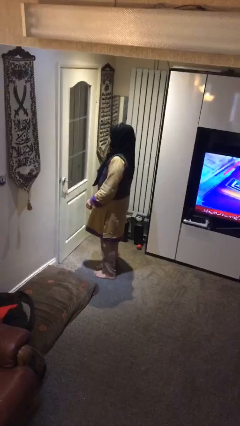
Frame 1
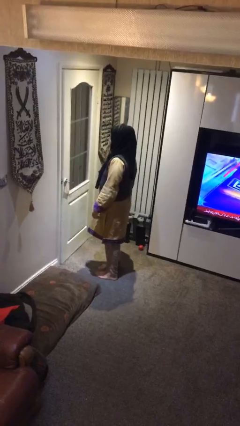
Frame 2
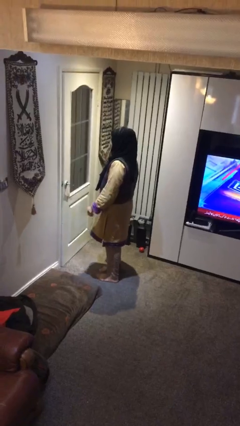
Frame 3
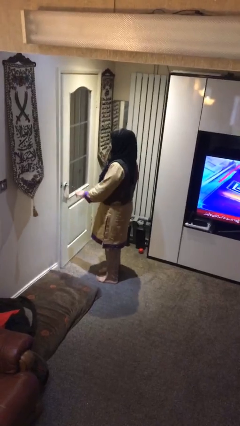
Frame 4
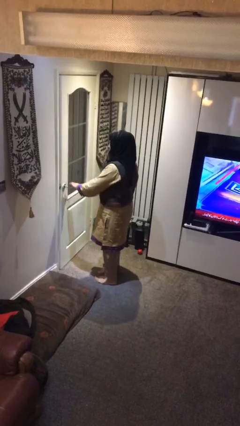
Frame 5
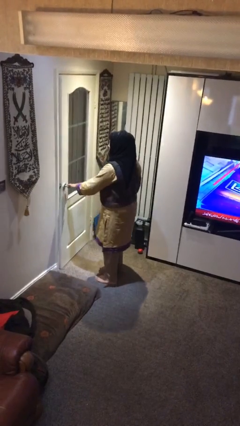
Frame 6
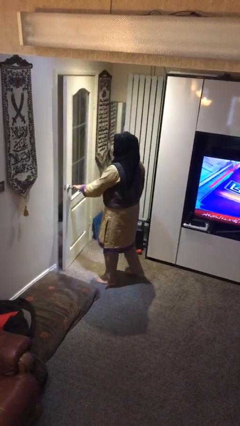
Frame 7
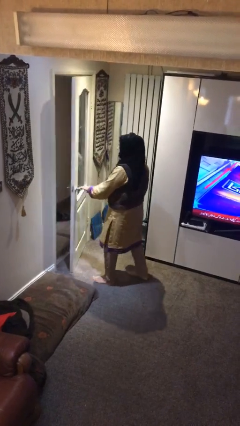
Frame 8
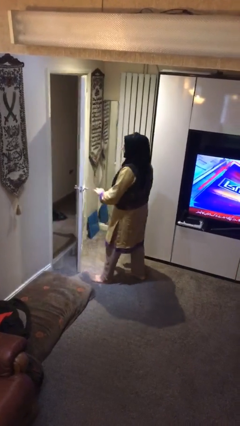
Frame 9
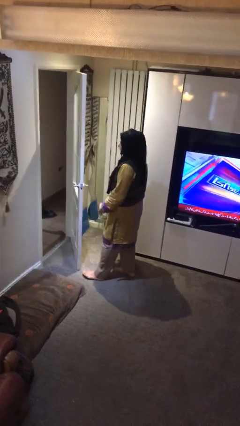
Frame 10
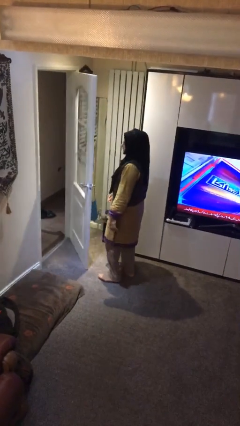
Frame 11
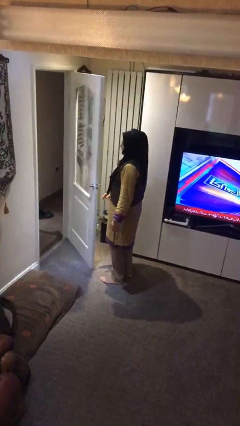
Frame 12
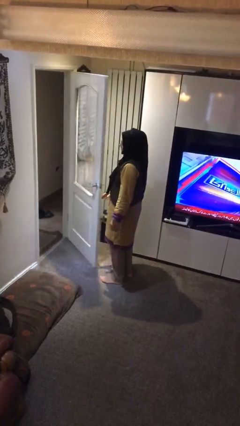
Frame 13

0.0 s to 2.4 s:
person opens facility door

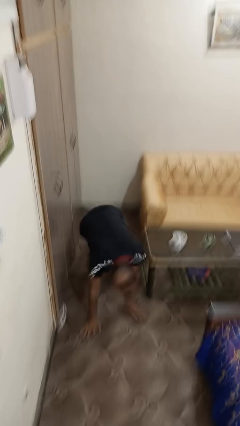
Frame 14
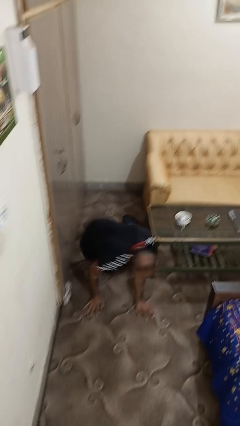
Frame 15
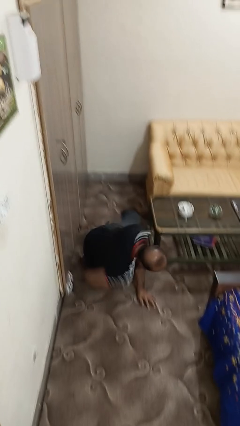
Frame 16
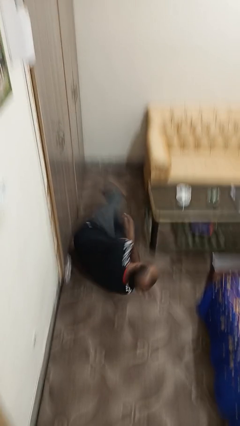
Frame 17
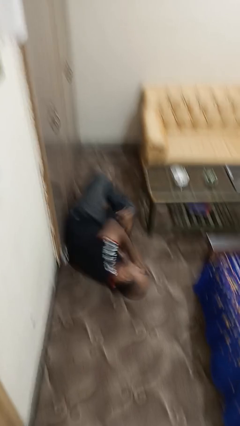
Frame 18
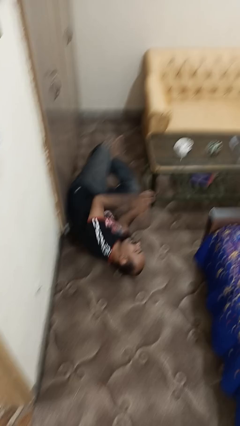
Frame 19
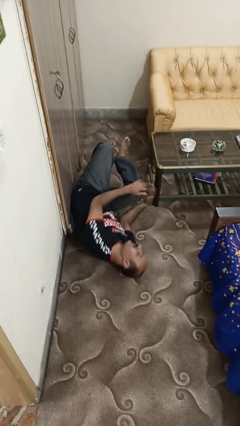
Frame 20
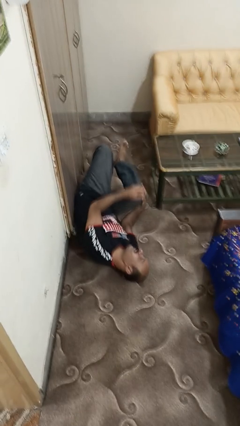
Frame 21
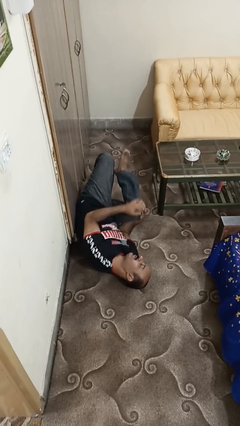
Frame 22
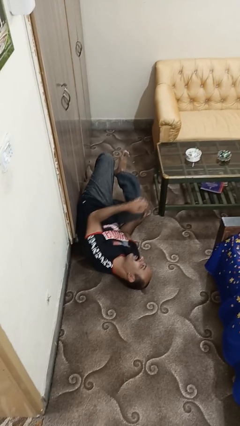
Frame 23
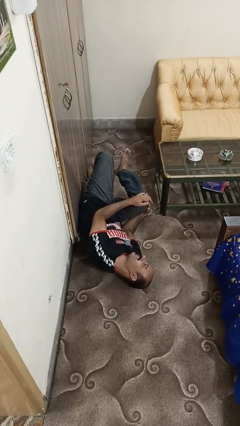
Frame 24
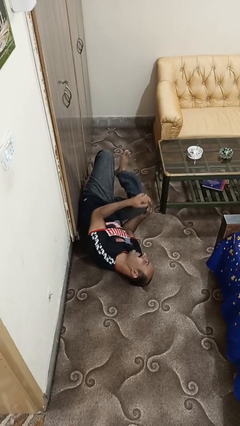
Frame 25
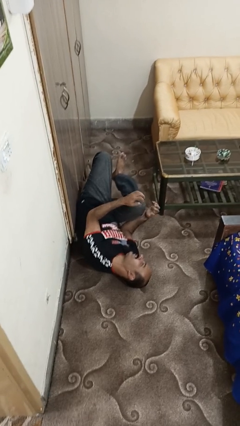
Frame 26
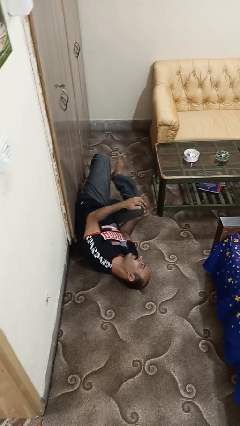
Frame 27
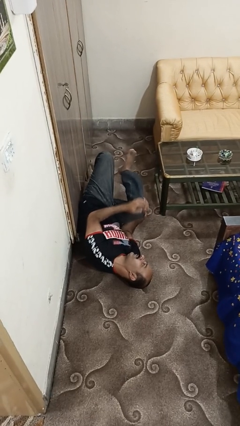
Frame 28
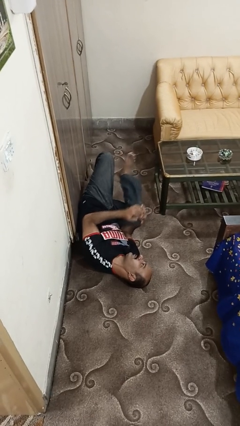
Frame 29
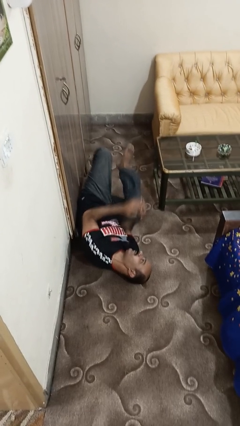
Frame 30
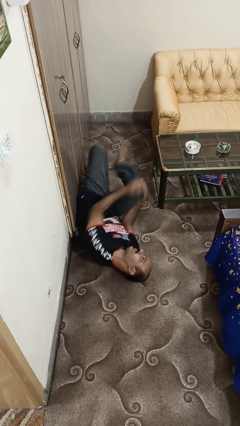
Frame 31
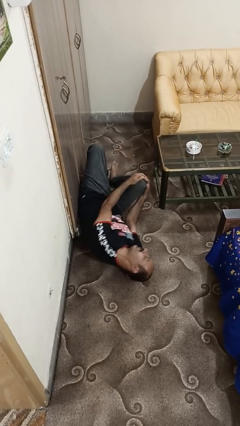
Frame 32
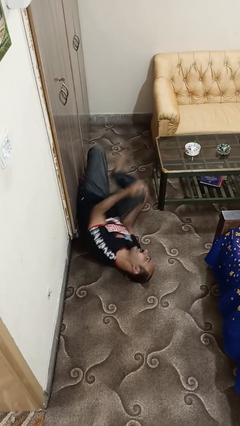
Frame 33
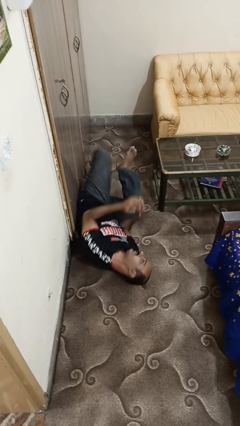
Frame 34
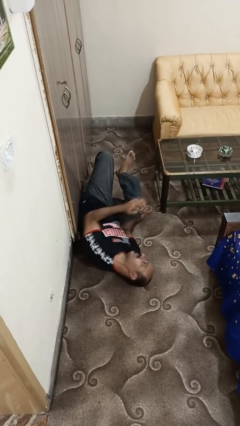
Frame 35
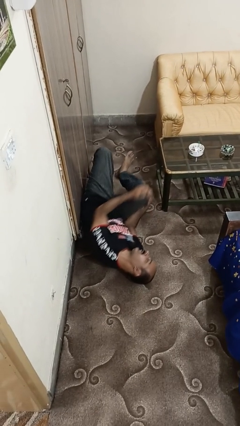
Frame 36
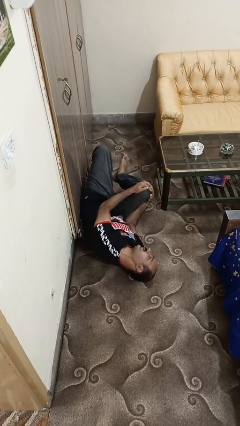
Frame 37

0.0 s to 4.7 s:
person lies down on floor

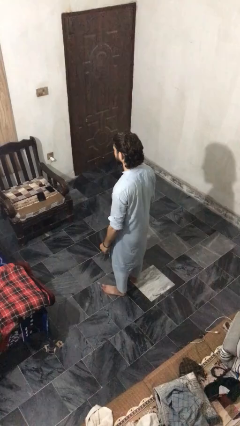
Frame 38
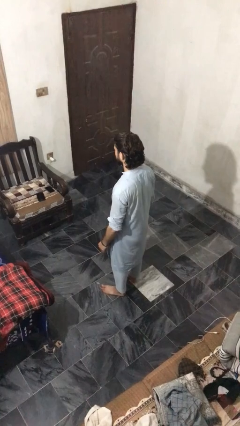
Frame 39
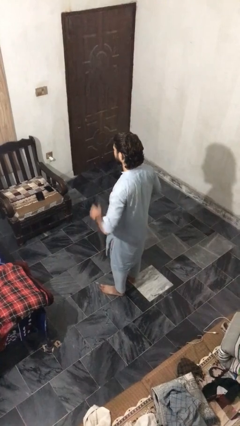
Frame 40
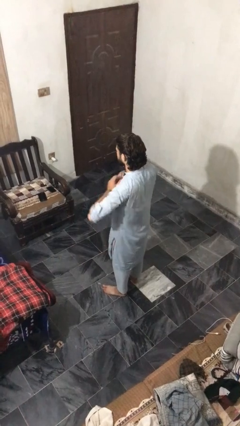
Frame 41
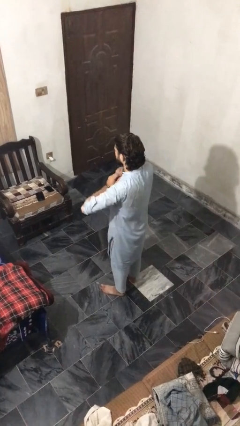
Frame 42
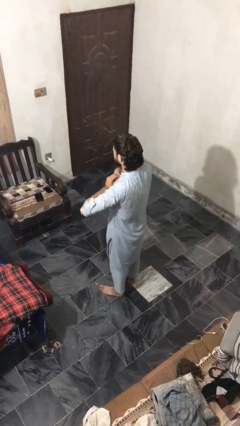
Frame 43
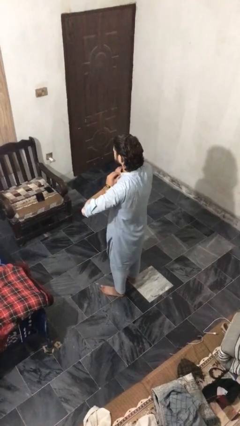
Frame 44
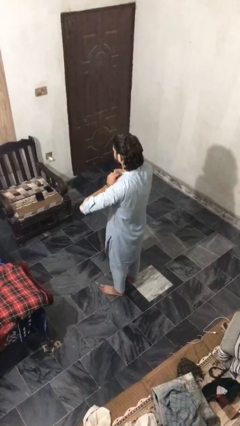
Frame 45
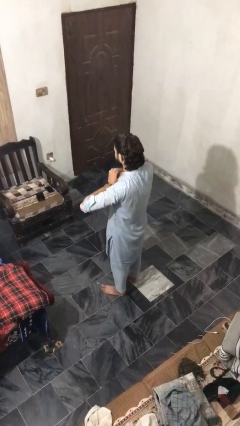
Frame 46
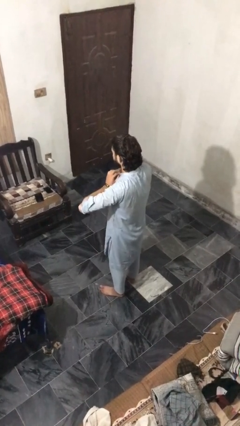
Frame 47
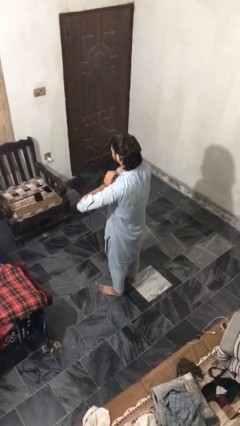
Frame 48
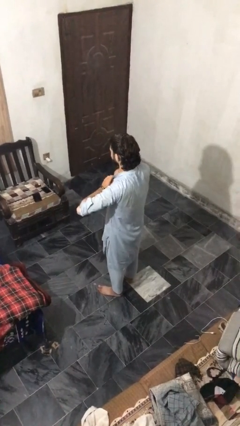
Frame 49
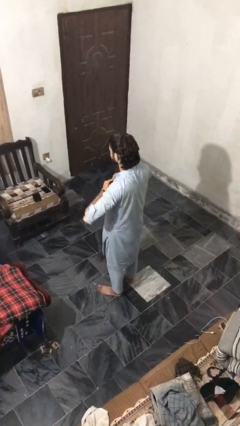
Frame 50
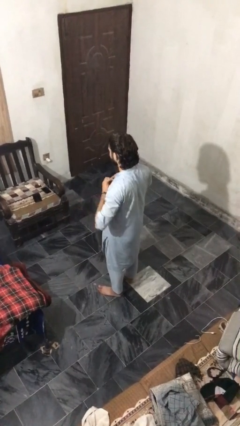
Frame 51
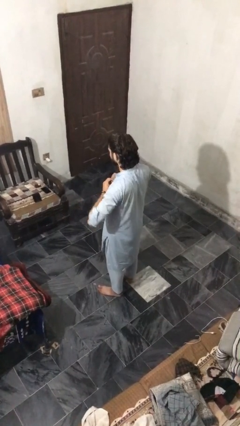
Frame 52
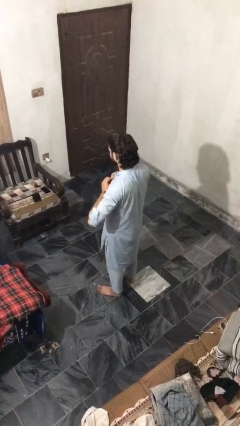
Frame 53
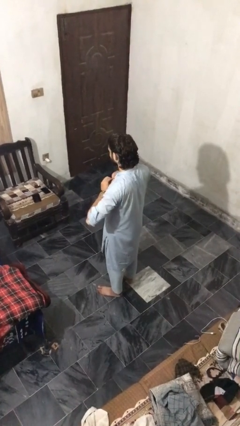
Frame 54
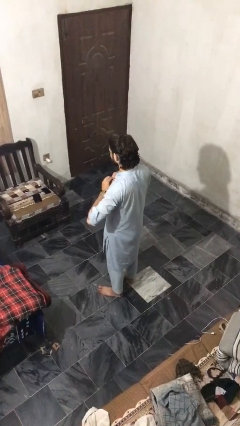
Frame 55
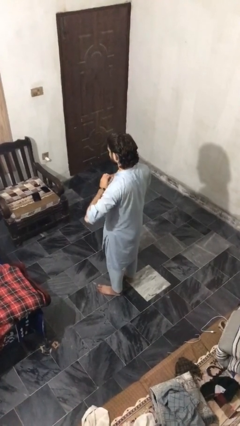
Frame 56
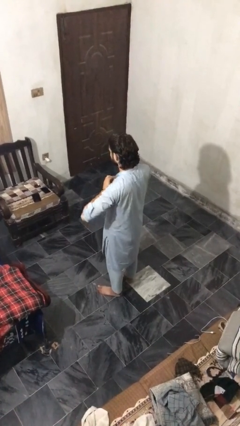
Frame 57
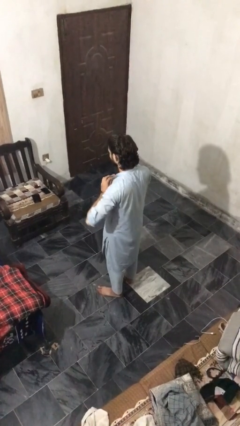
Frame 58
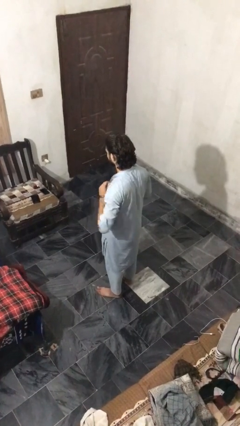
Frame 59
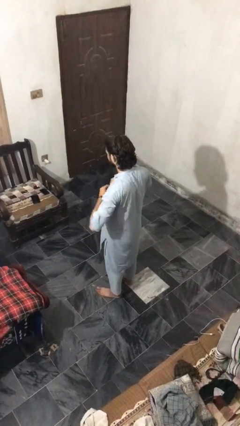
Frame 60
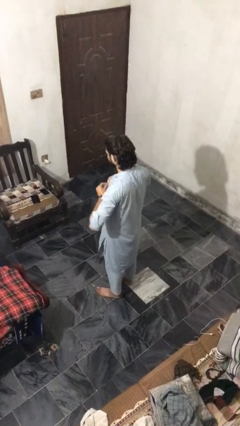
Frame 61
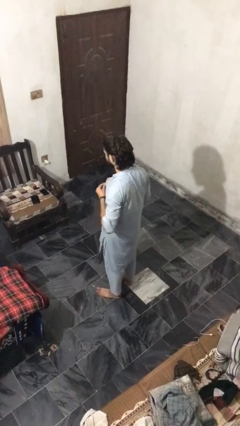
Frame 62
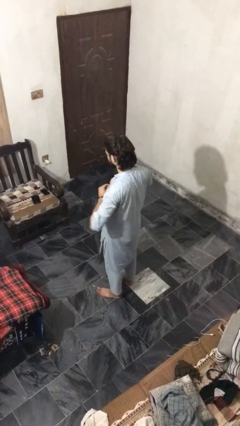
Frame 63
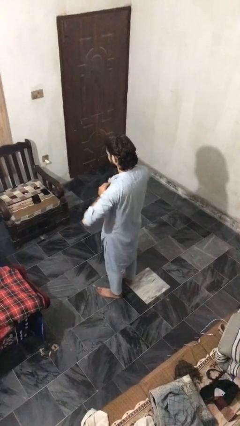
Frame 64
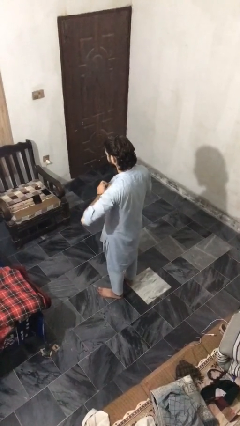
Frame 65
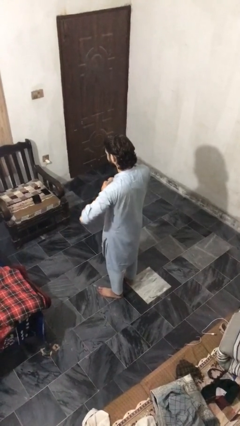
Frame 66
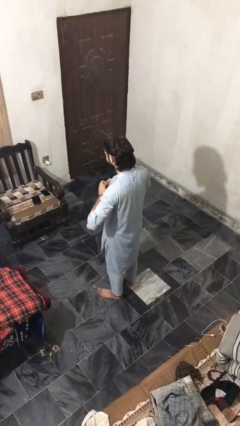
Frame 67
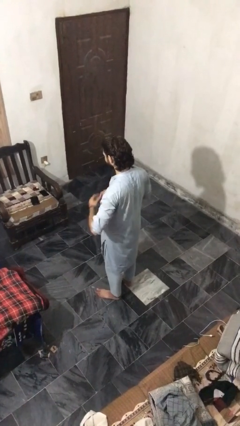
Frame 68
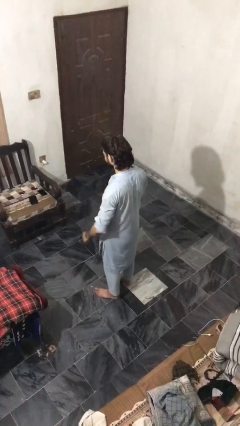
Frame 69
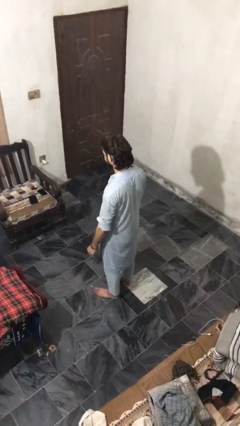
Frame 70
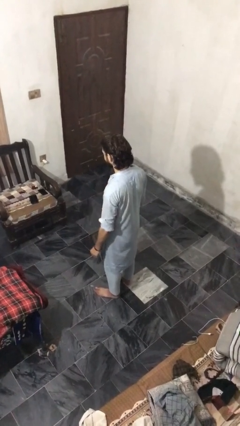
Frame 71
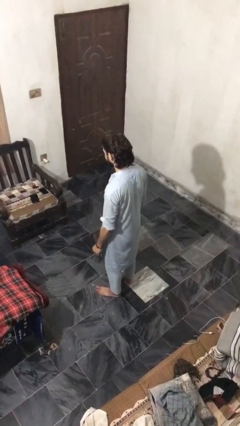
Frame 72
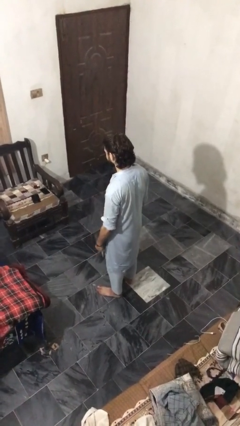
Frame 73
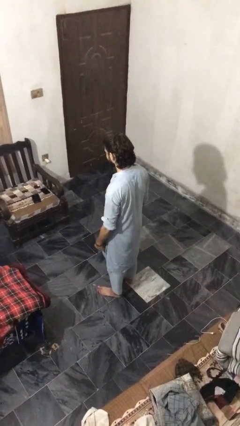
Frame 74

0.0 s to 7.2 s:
person unbuttons shirt

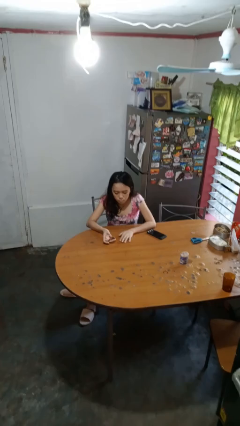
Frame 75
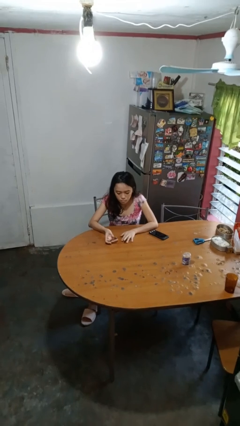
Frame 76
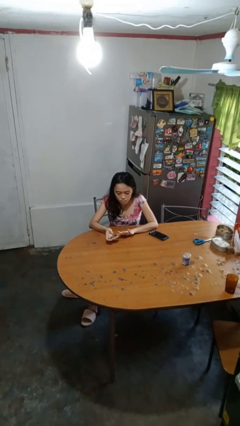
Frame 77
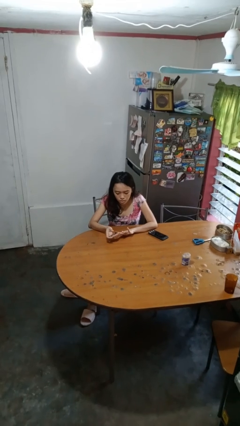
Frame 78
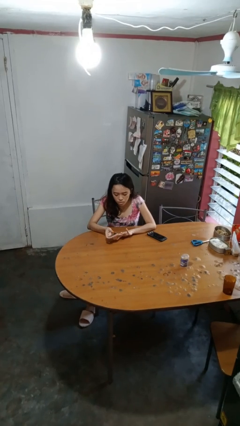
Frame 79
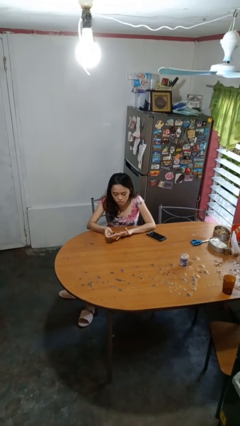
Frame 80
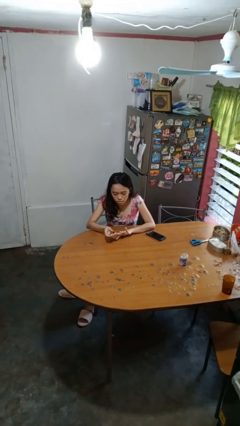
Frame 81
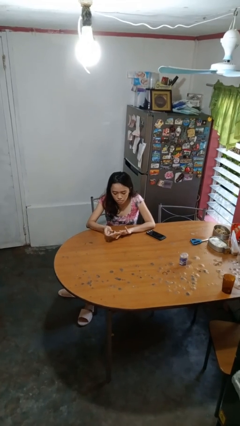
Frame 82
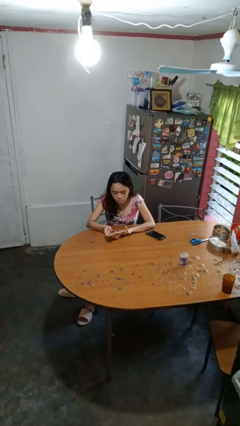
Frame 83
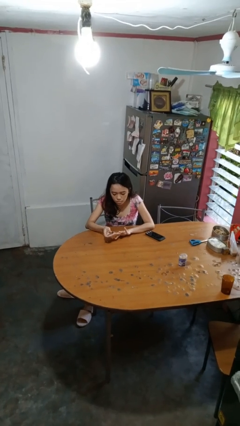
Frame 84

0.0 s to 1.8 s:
person clips fingernails

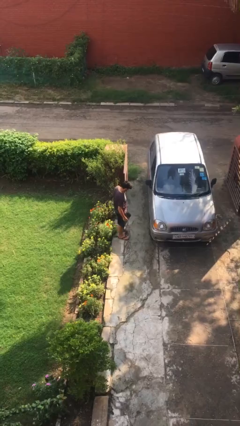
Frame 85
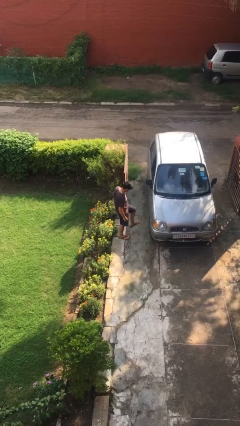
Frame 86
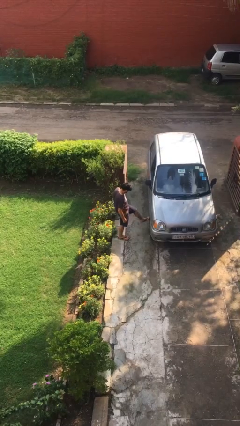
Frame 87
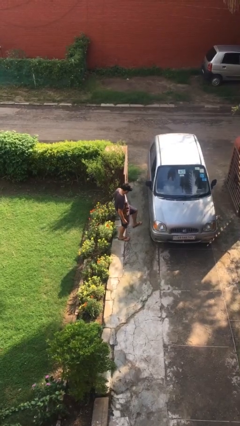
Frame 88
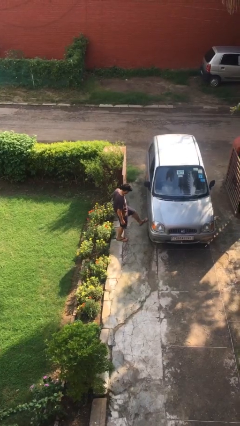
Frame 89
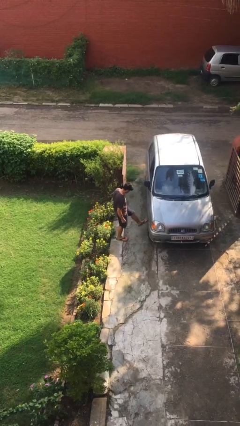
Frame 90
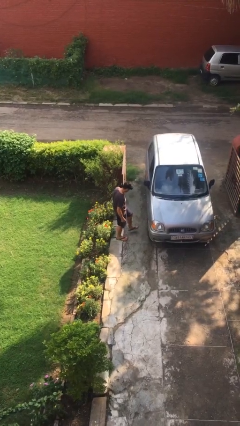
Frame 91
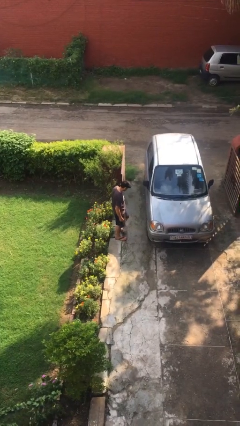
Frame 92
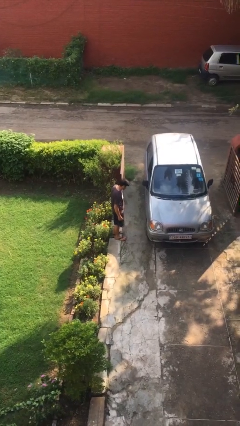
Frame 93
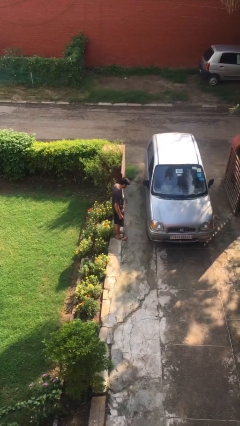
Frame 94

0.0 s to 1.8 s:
person kicks car tires
